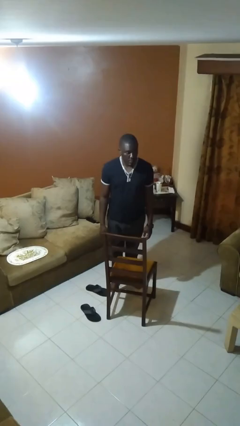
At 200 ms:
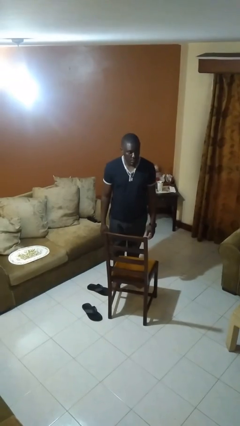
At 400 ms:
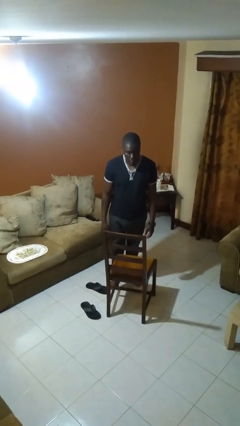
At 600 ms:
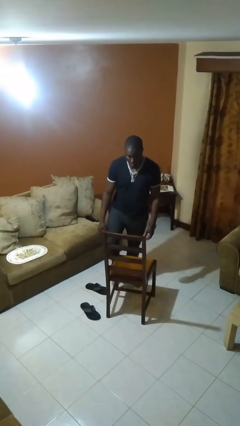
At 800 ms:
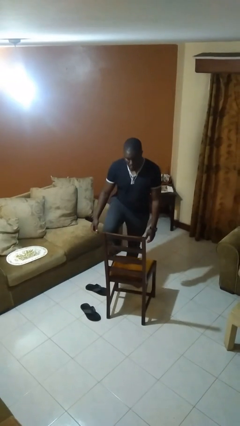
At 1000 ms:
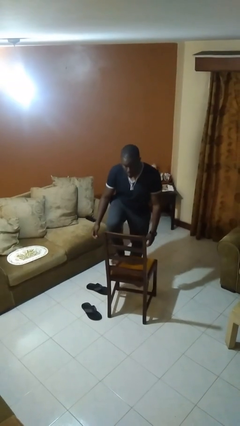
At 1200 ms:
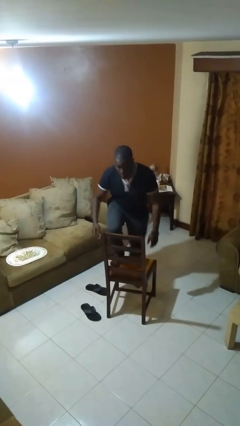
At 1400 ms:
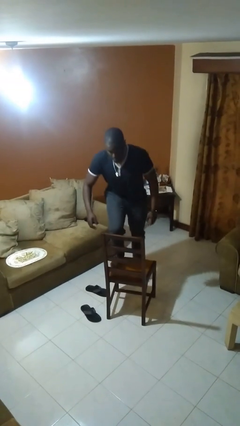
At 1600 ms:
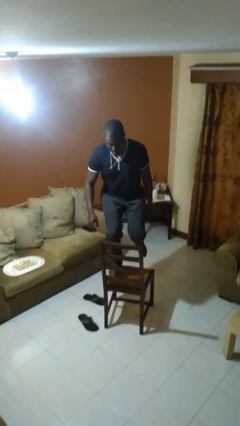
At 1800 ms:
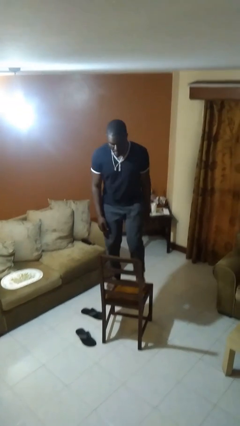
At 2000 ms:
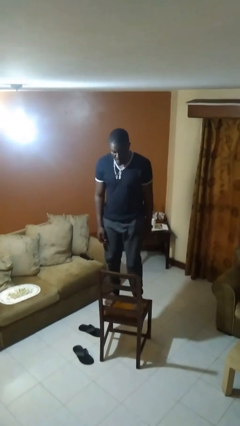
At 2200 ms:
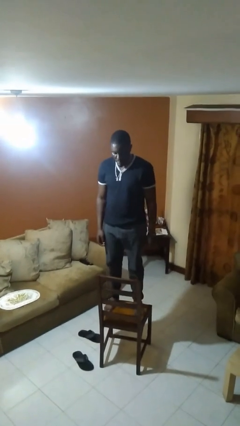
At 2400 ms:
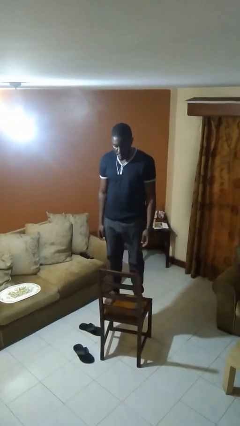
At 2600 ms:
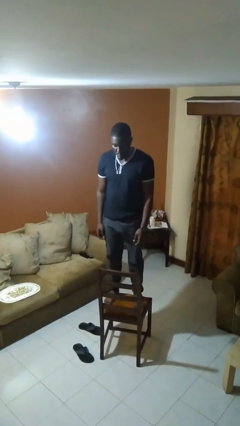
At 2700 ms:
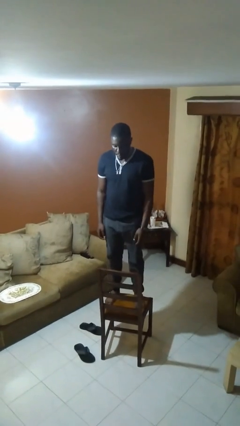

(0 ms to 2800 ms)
person climbs on chair

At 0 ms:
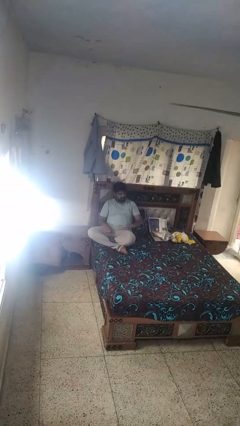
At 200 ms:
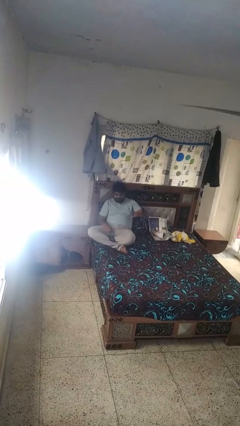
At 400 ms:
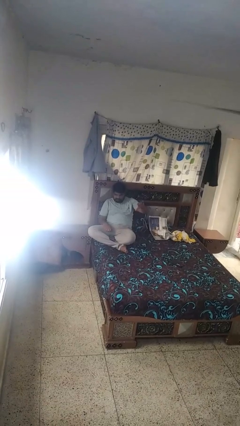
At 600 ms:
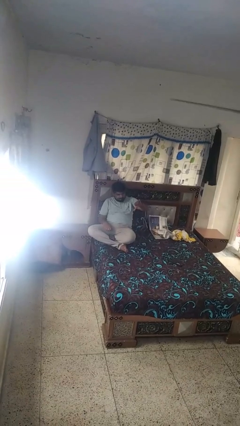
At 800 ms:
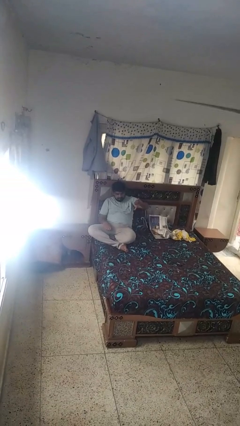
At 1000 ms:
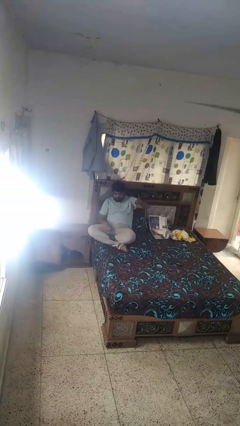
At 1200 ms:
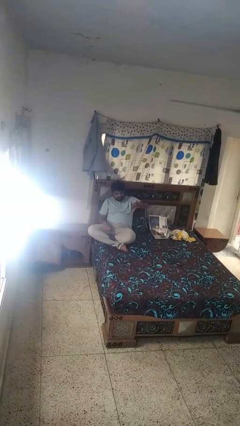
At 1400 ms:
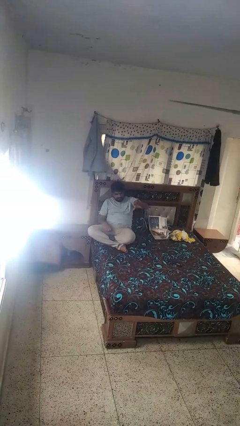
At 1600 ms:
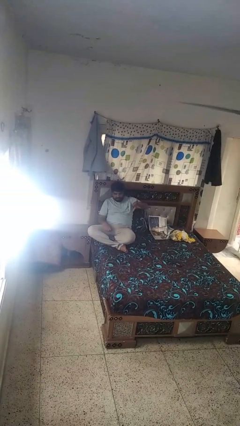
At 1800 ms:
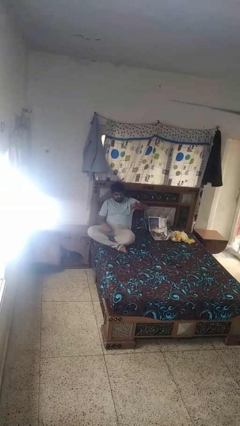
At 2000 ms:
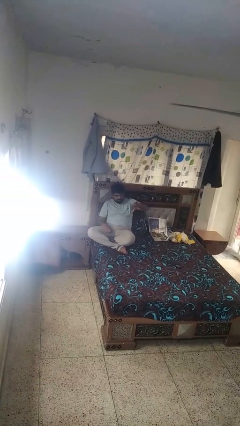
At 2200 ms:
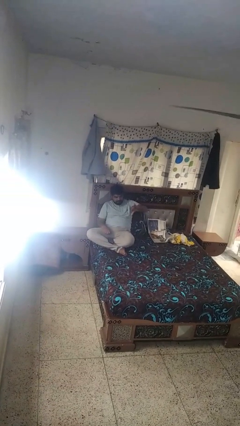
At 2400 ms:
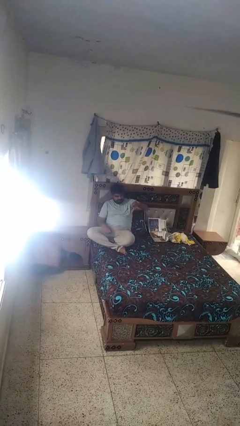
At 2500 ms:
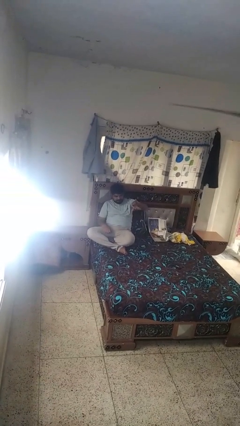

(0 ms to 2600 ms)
person gestures thumbs down

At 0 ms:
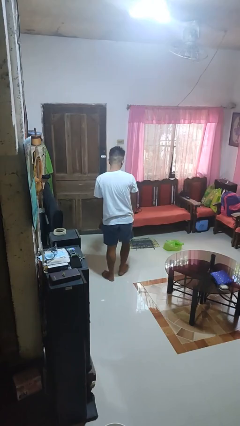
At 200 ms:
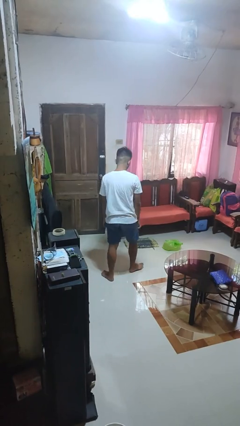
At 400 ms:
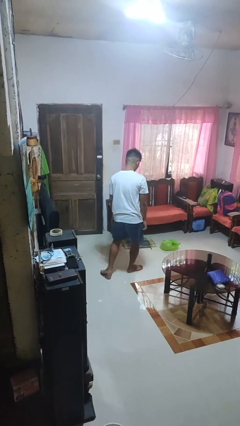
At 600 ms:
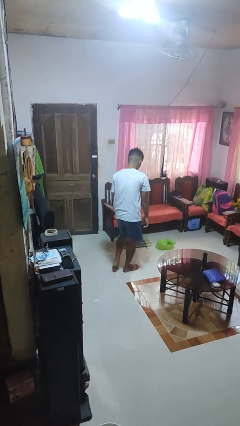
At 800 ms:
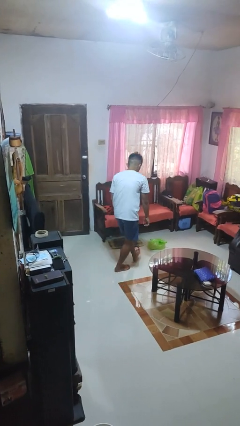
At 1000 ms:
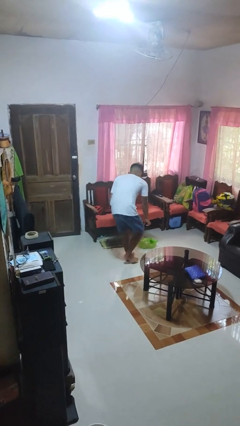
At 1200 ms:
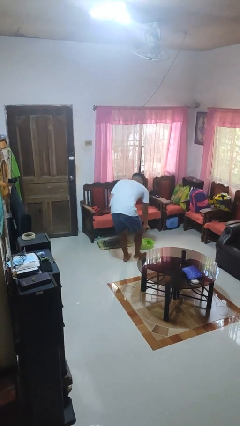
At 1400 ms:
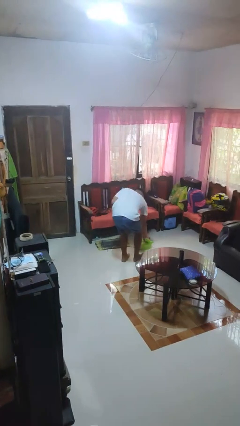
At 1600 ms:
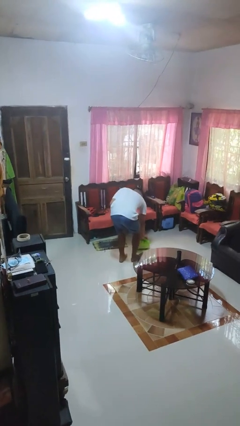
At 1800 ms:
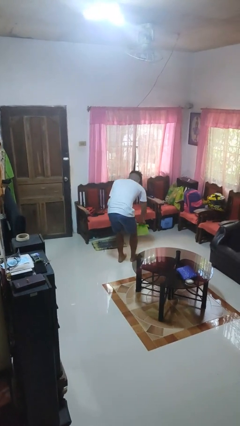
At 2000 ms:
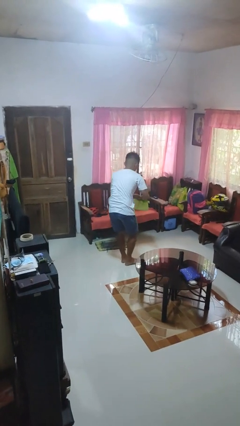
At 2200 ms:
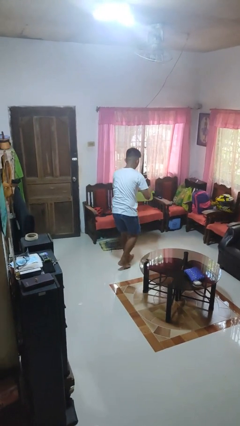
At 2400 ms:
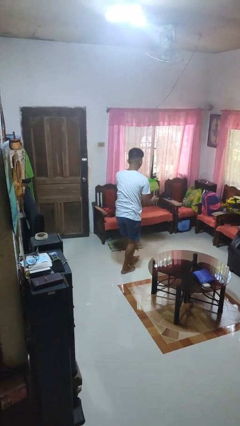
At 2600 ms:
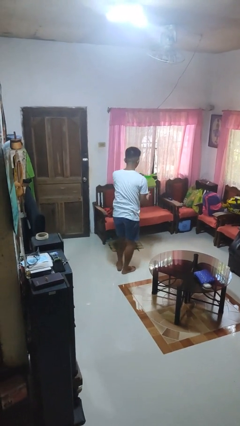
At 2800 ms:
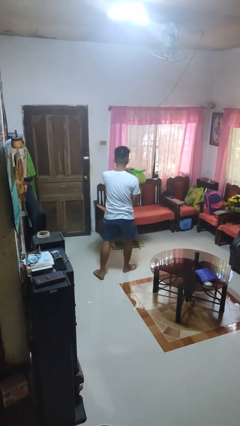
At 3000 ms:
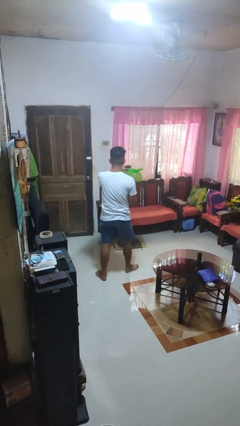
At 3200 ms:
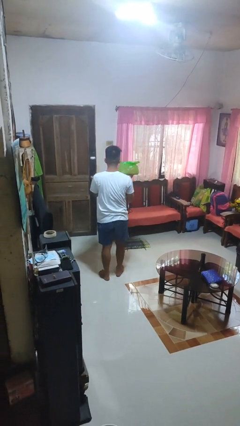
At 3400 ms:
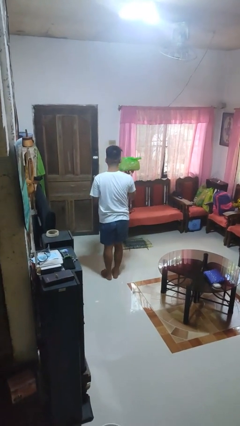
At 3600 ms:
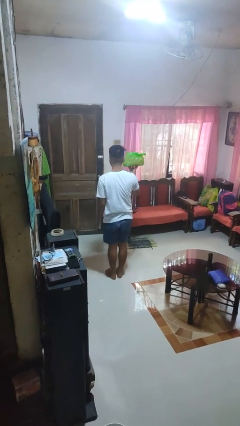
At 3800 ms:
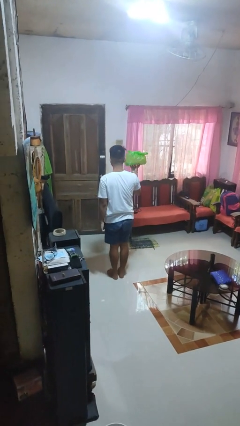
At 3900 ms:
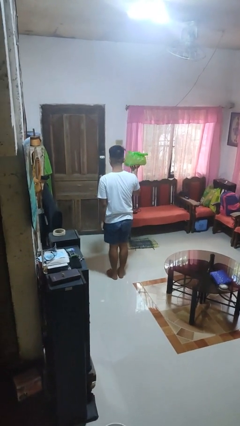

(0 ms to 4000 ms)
person picks up object from floor

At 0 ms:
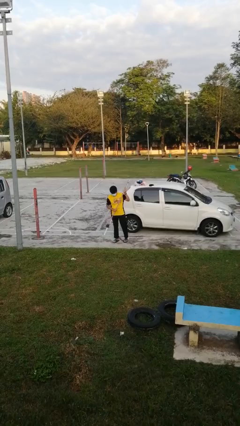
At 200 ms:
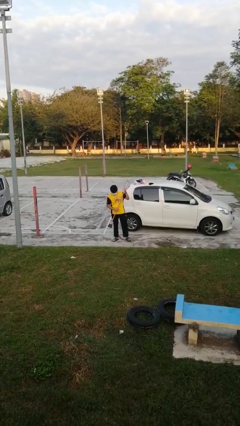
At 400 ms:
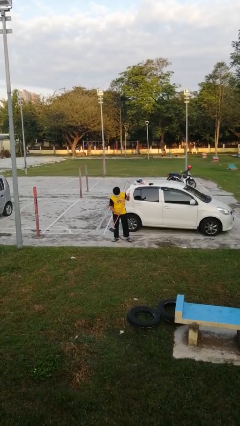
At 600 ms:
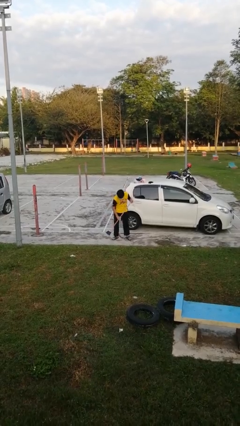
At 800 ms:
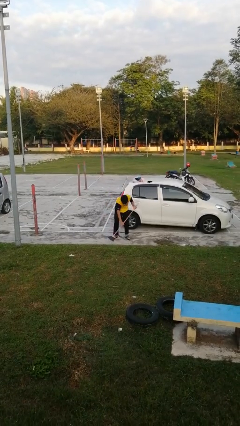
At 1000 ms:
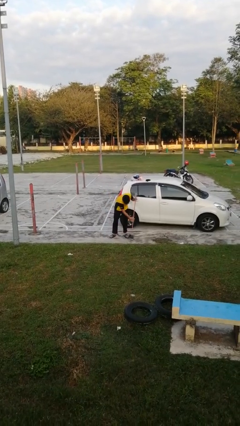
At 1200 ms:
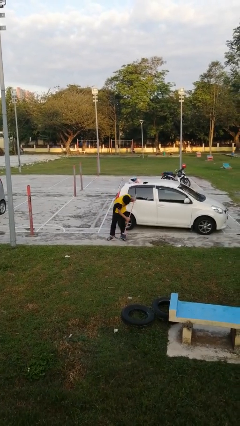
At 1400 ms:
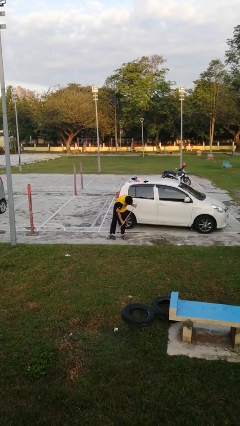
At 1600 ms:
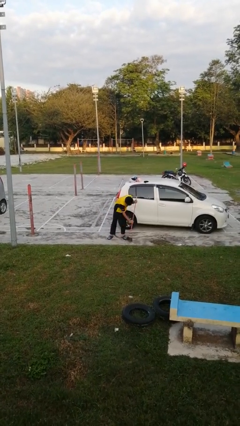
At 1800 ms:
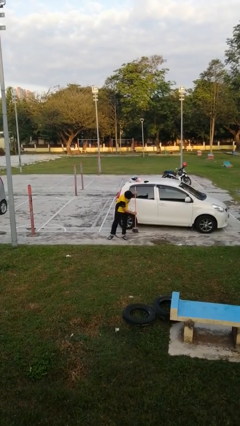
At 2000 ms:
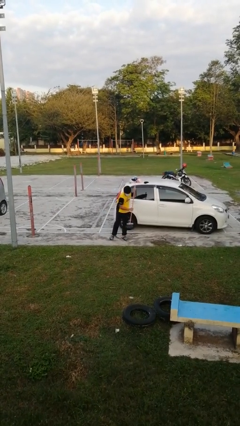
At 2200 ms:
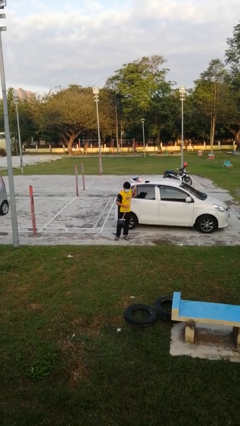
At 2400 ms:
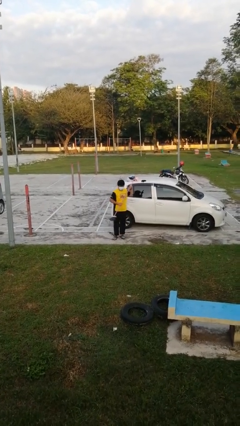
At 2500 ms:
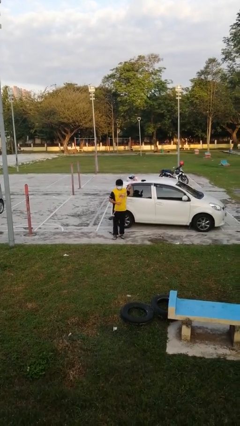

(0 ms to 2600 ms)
person sweeps floor

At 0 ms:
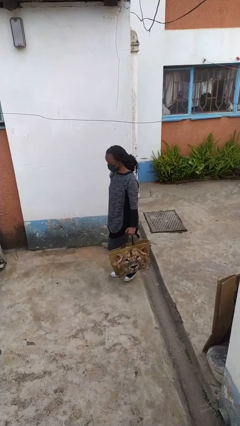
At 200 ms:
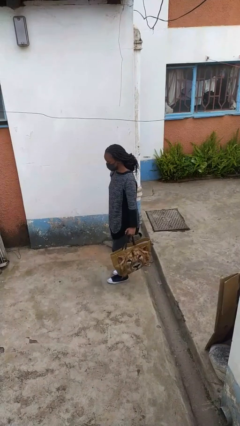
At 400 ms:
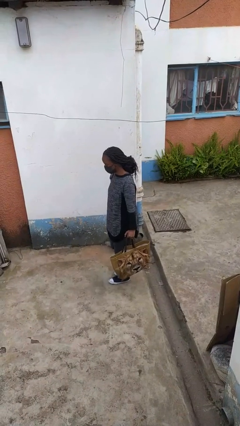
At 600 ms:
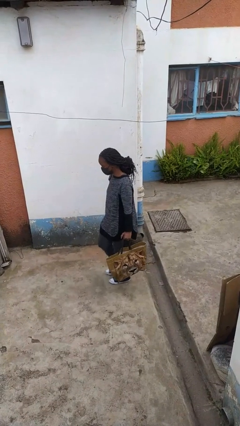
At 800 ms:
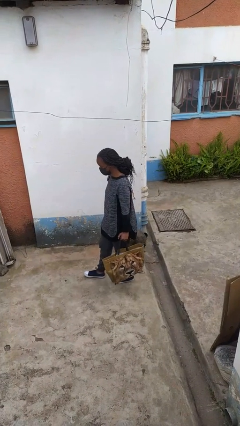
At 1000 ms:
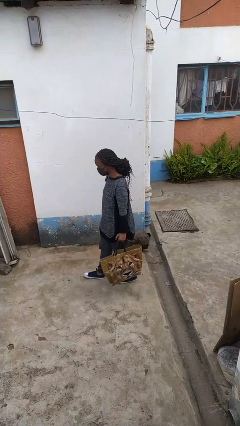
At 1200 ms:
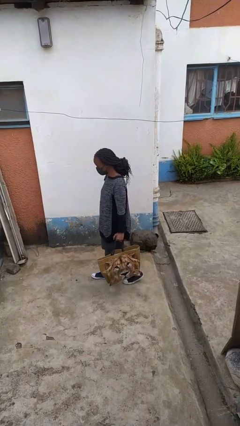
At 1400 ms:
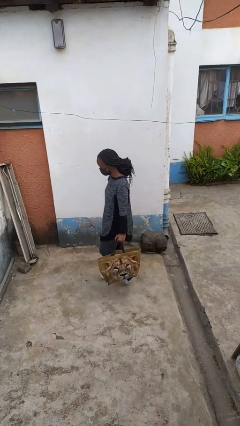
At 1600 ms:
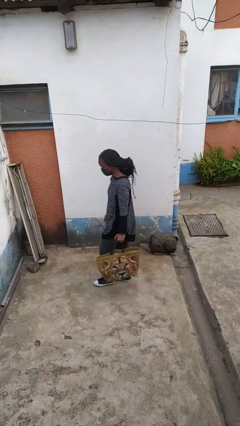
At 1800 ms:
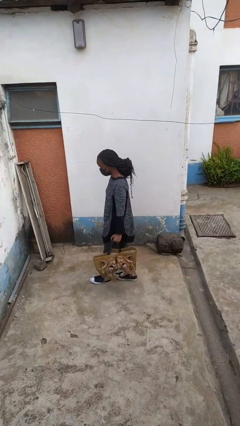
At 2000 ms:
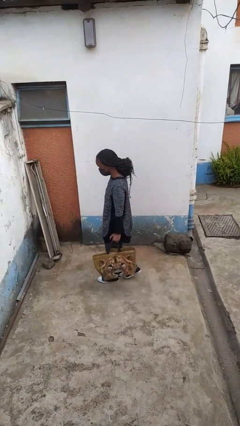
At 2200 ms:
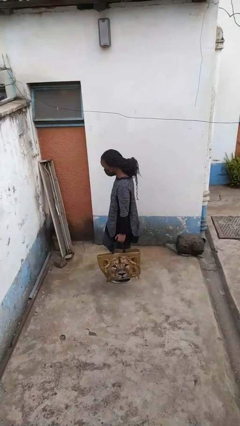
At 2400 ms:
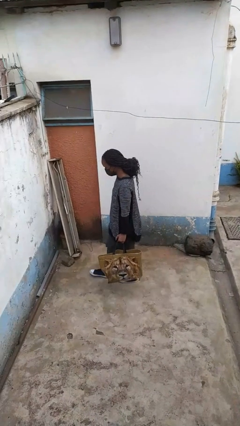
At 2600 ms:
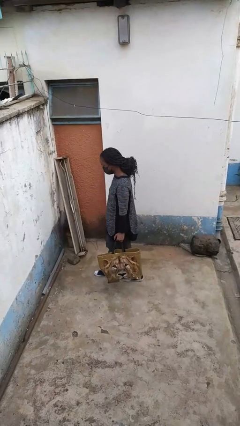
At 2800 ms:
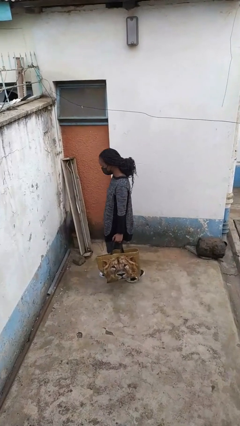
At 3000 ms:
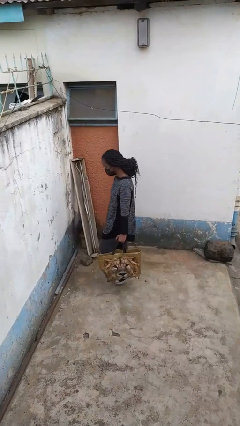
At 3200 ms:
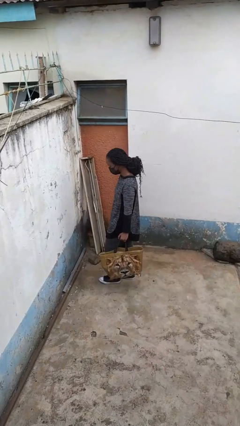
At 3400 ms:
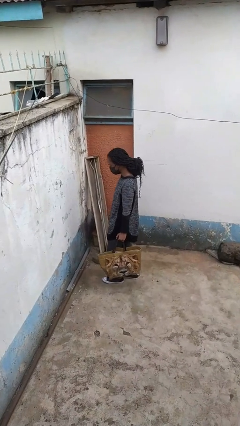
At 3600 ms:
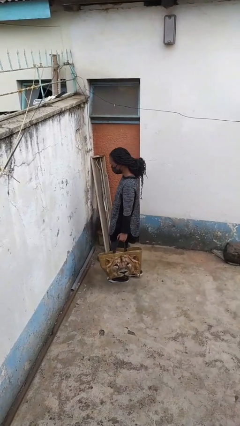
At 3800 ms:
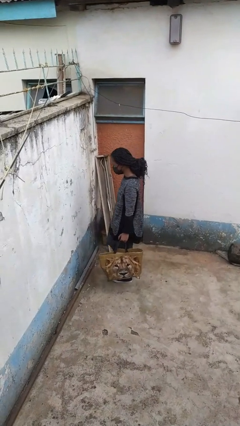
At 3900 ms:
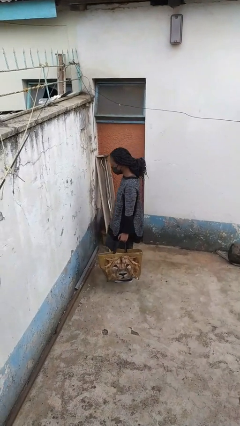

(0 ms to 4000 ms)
person carries groceries

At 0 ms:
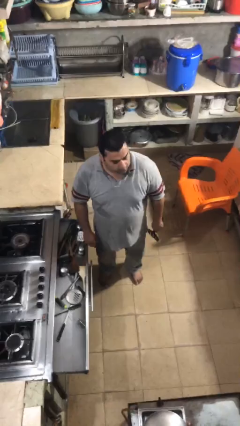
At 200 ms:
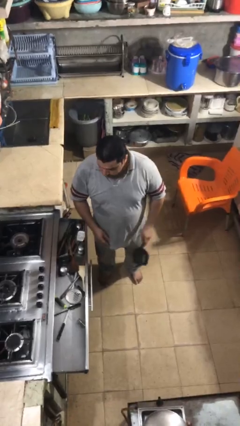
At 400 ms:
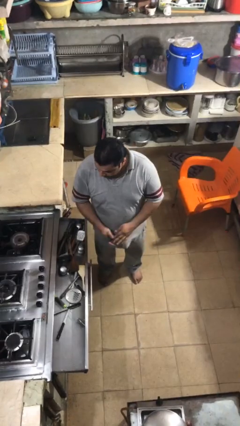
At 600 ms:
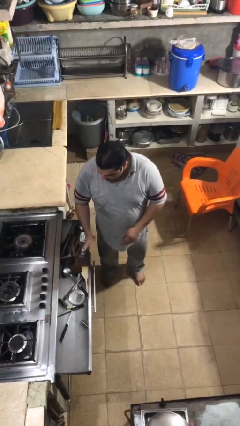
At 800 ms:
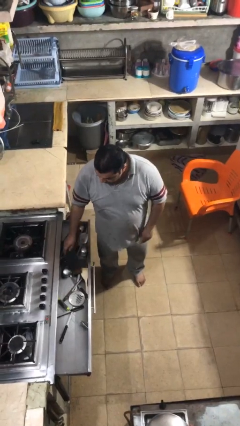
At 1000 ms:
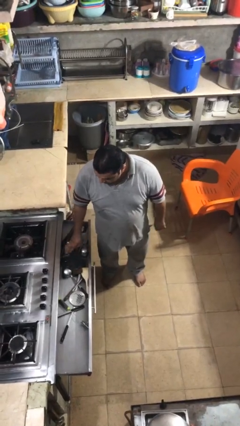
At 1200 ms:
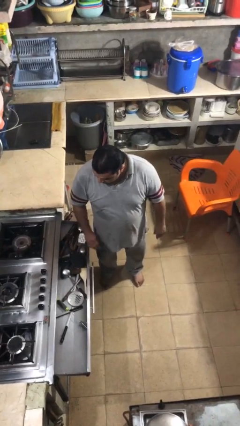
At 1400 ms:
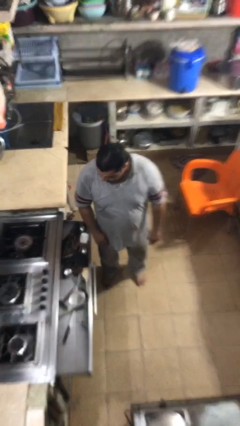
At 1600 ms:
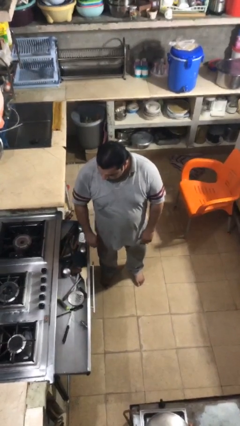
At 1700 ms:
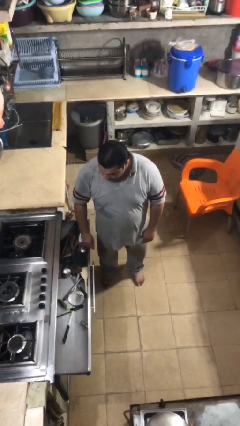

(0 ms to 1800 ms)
person puts object into kitchen drawer

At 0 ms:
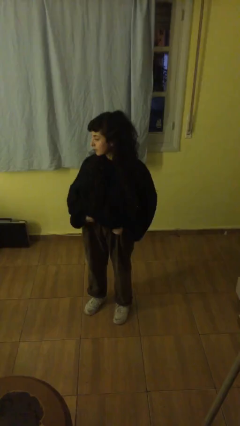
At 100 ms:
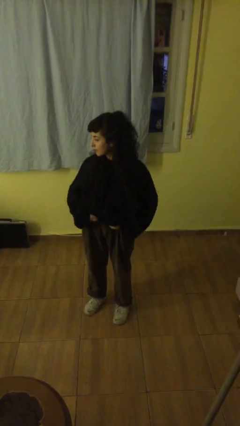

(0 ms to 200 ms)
person hikes up pants
